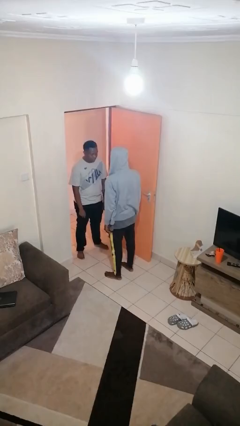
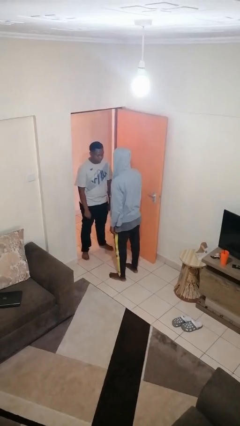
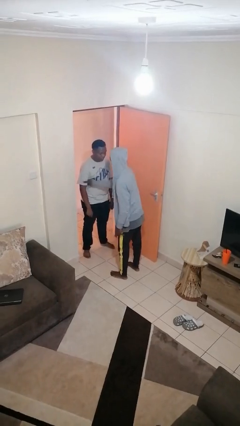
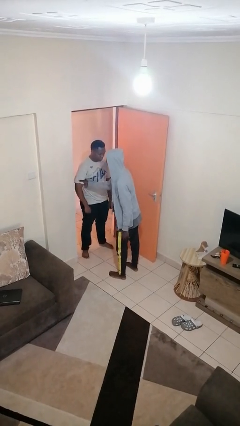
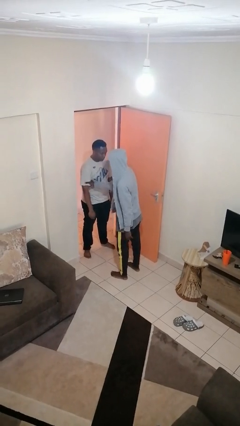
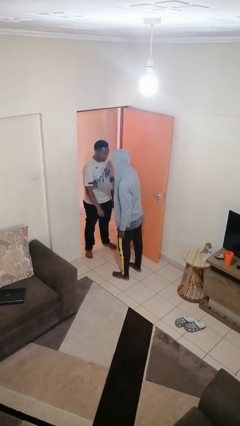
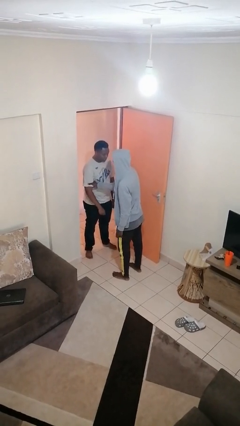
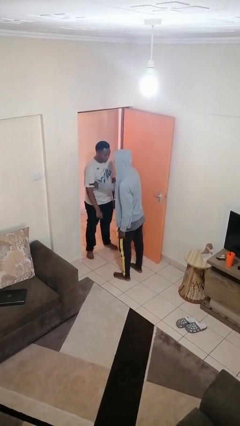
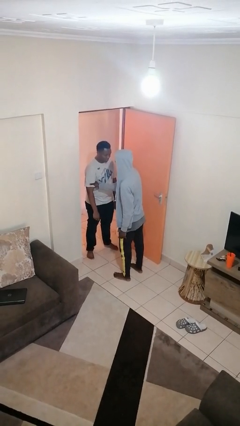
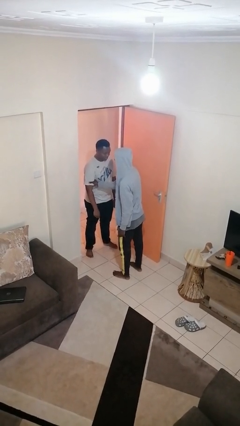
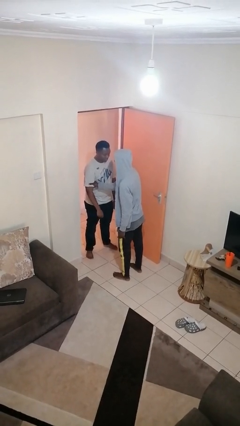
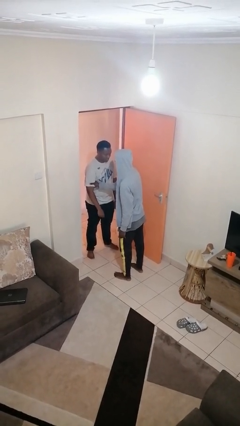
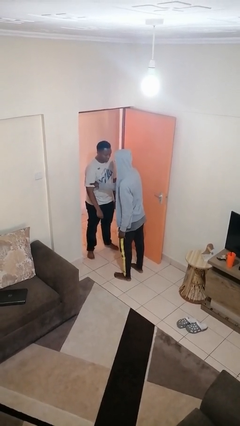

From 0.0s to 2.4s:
person grabs person by bicep

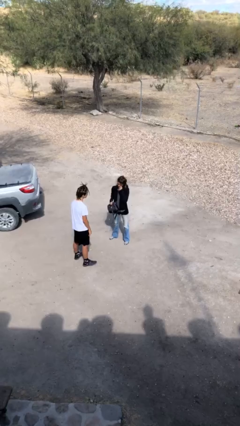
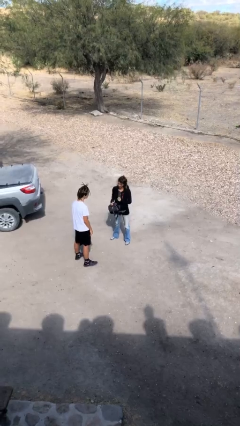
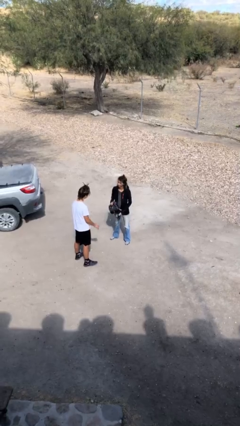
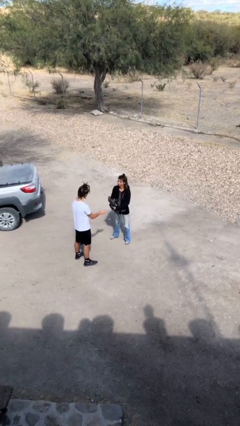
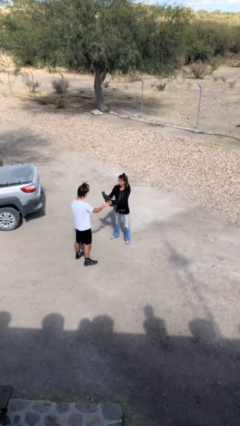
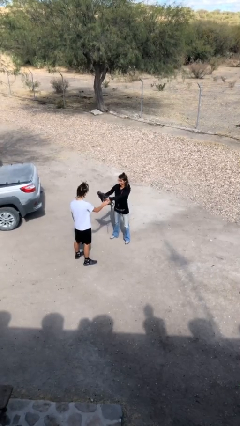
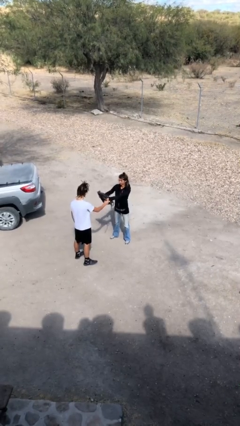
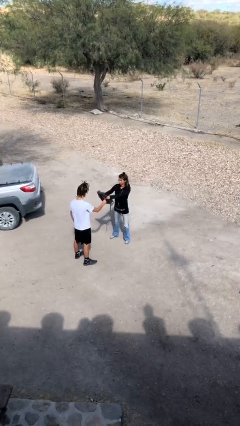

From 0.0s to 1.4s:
person transfers object to person

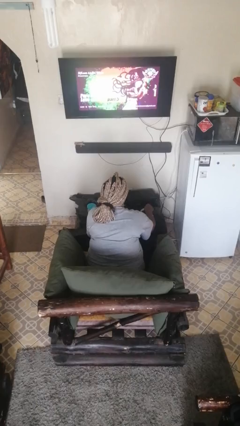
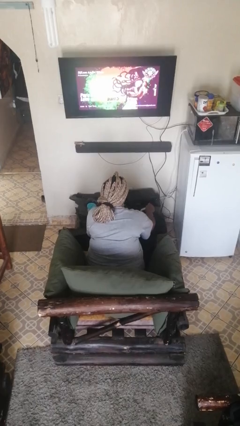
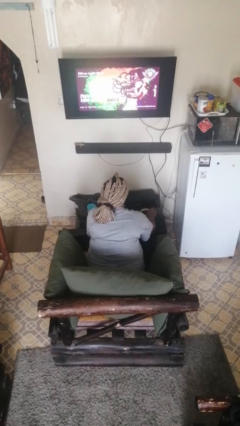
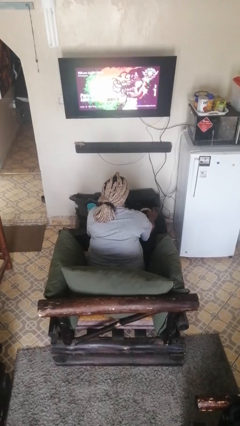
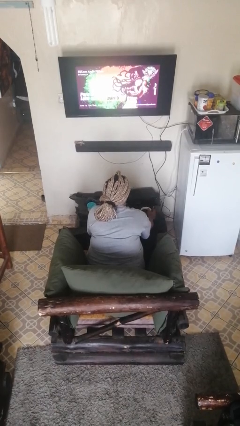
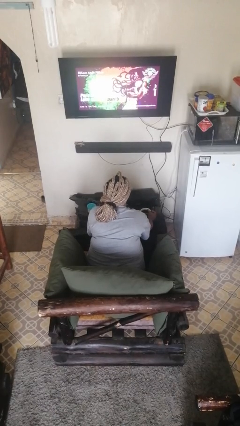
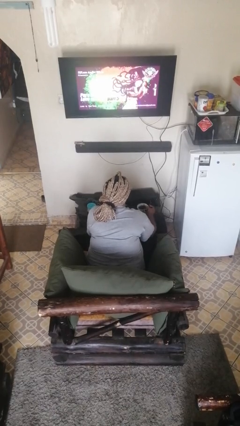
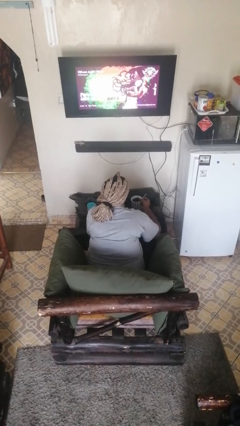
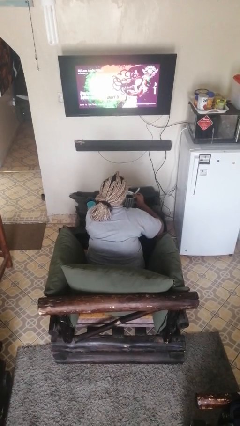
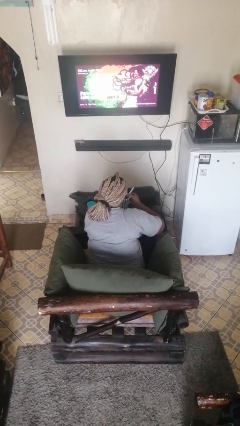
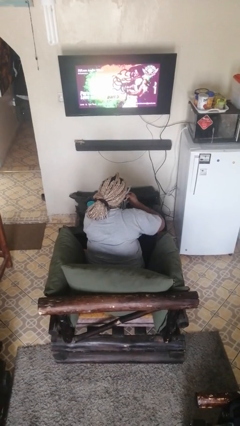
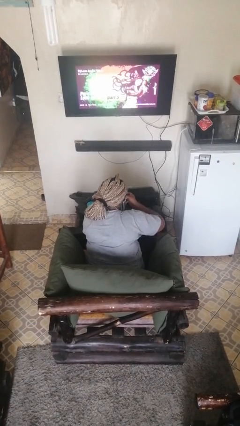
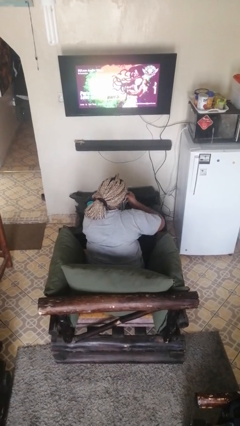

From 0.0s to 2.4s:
person drinks from mug

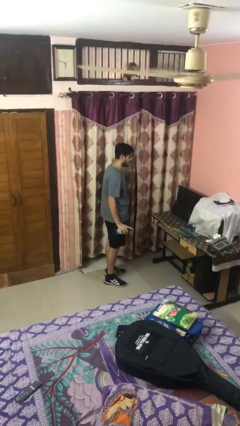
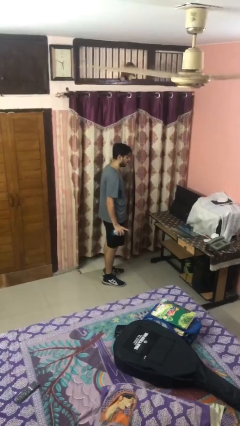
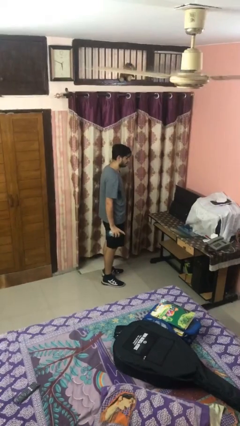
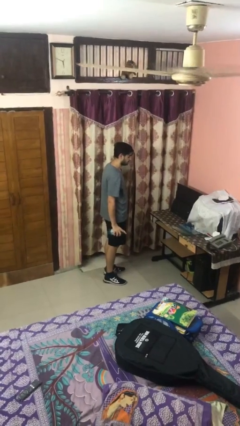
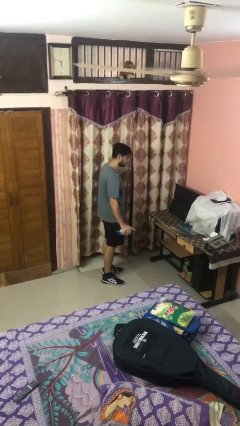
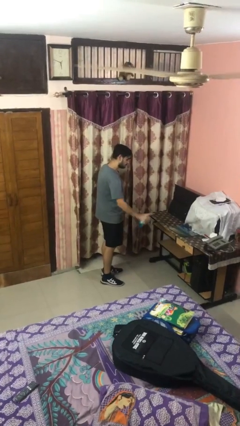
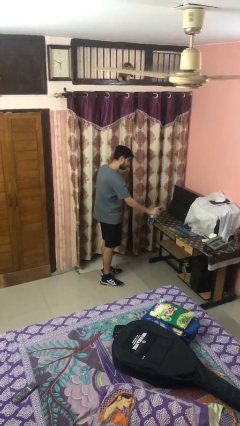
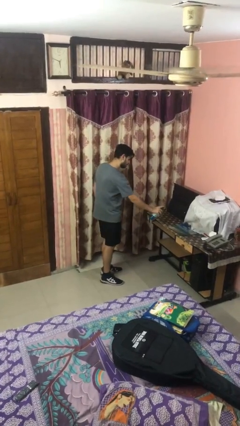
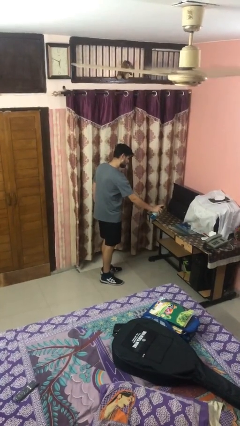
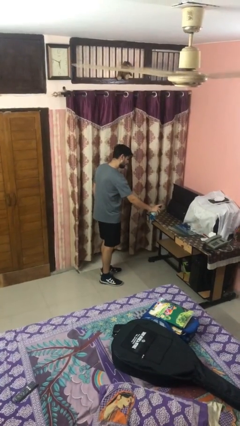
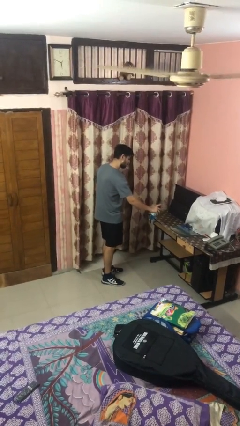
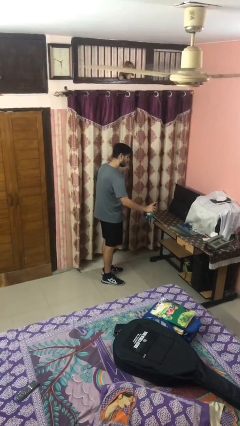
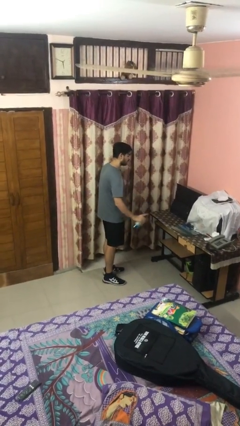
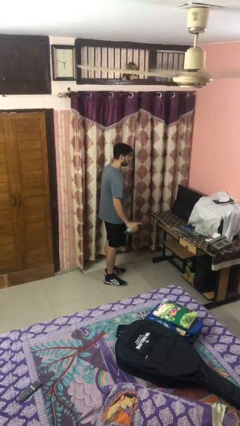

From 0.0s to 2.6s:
person sprays from bottle

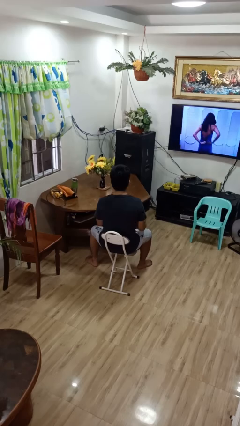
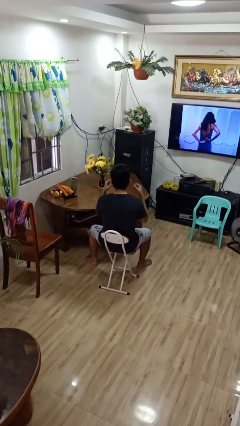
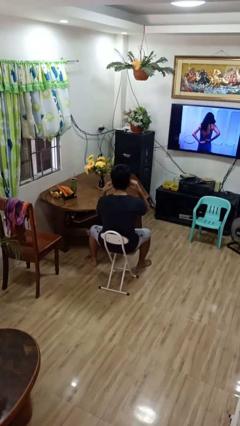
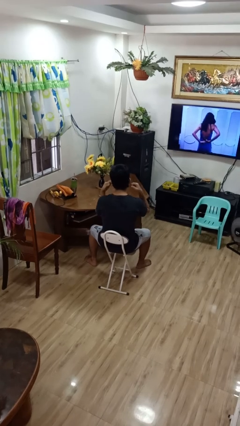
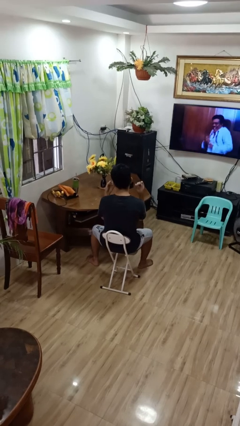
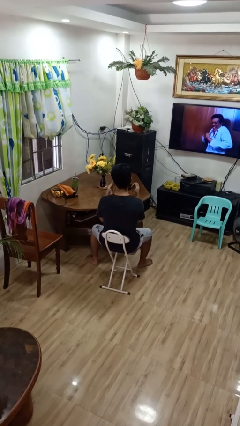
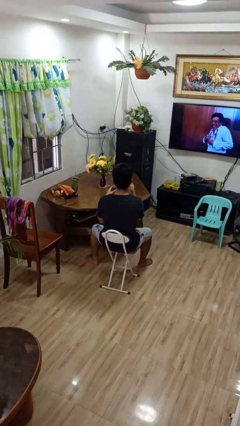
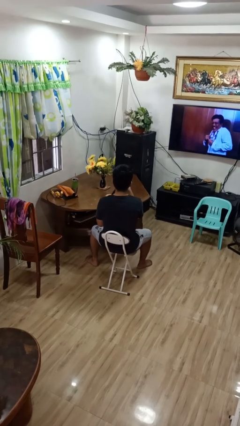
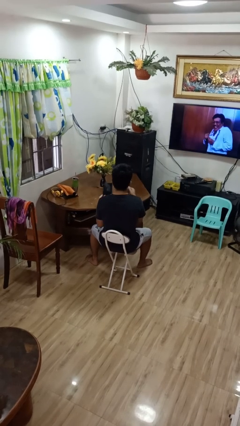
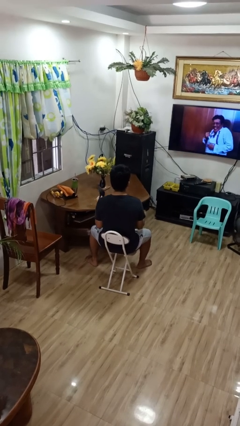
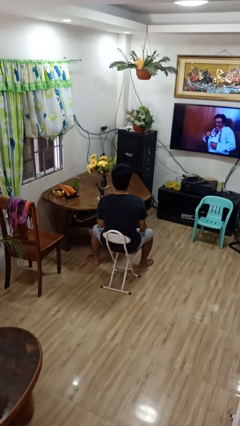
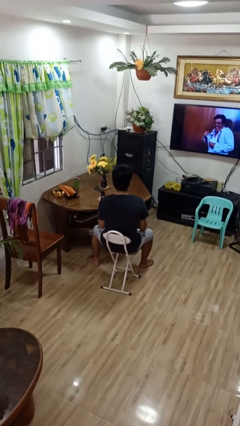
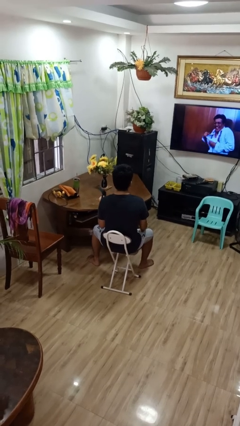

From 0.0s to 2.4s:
person takes off facemask

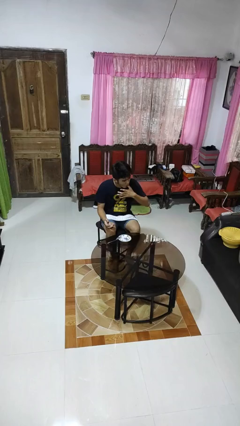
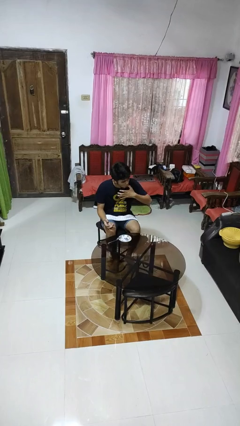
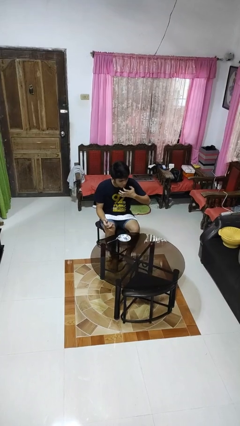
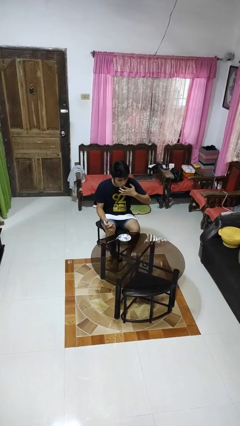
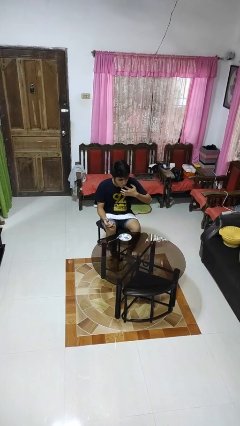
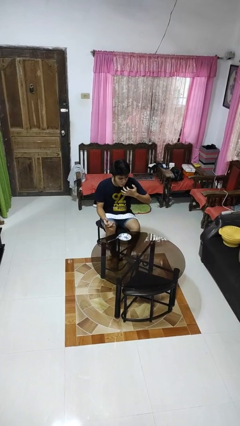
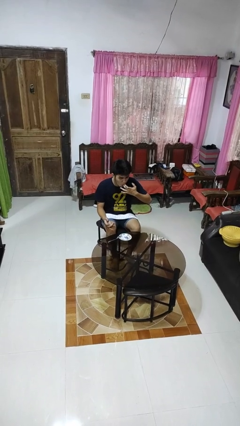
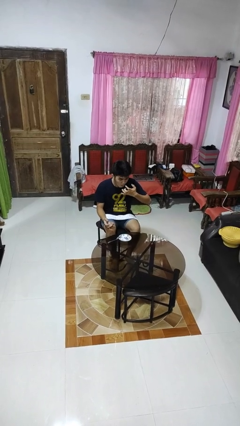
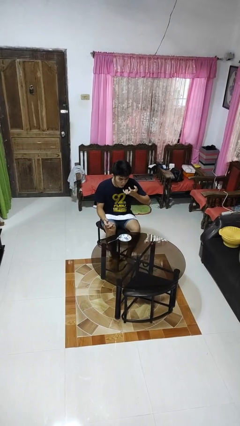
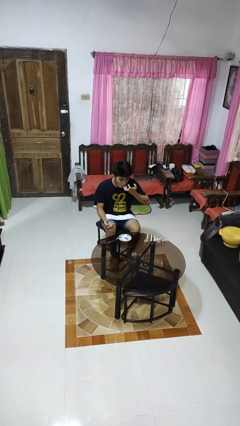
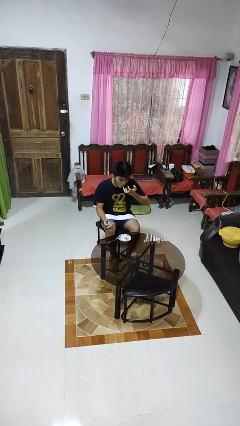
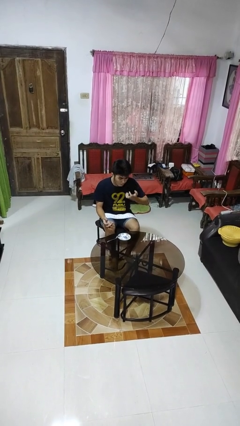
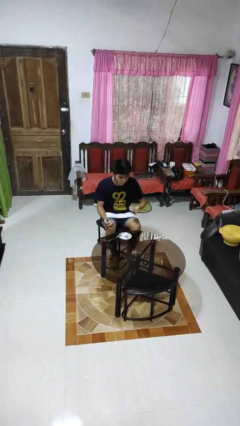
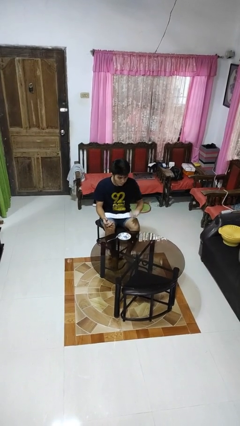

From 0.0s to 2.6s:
person licks fingers

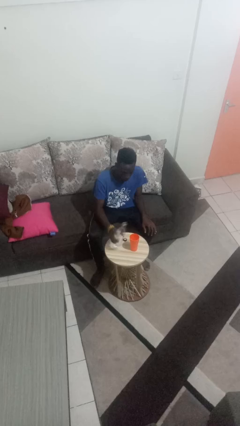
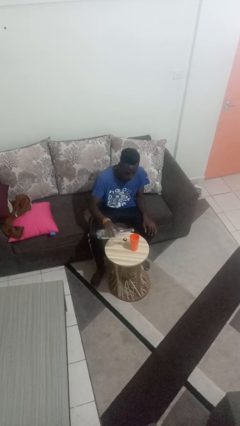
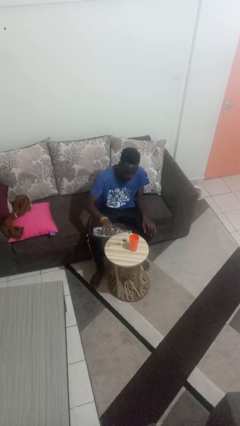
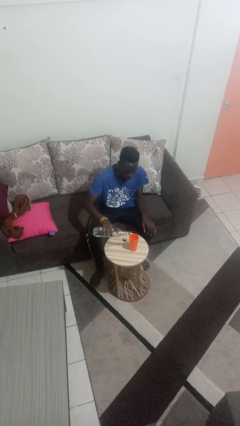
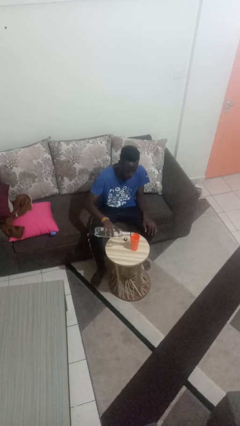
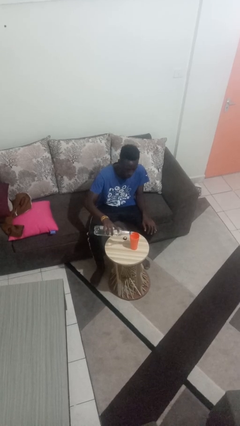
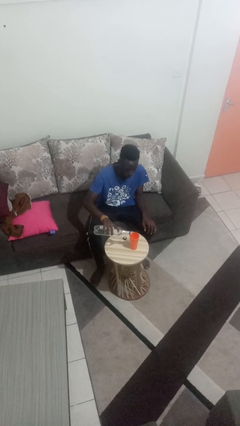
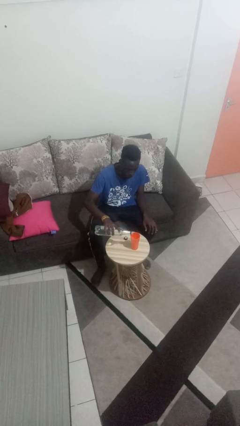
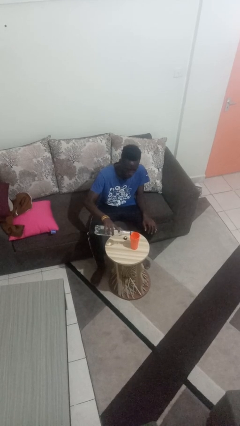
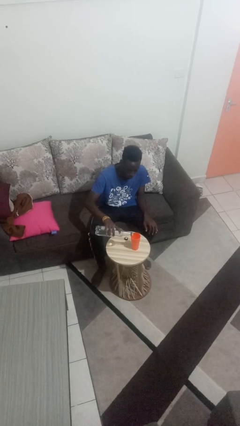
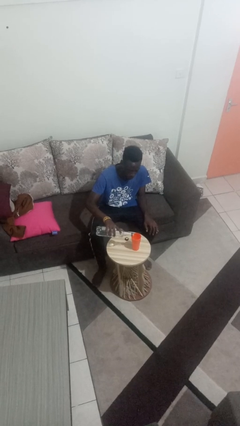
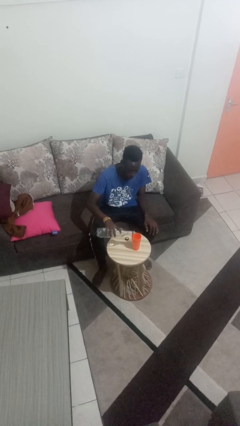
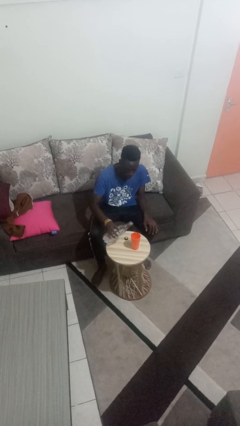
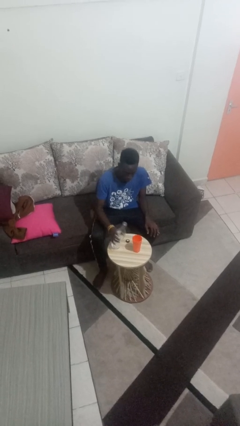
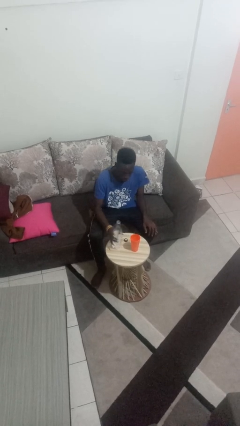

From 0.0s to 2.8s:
person pours liquid into cup
